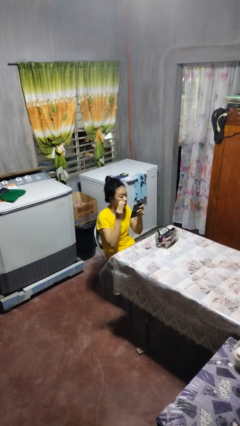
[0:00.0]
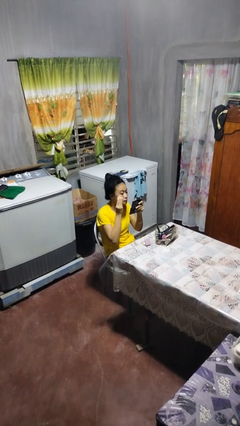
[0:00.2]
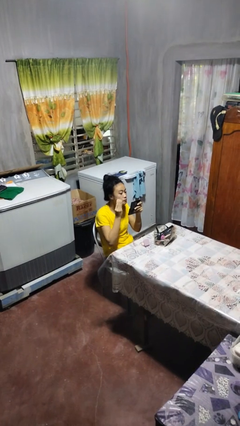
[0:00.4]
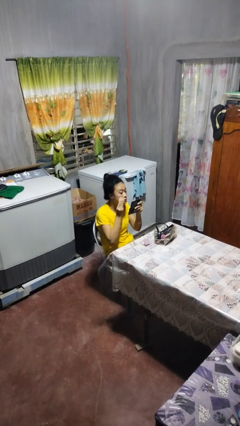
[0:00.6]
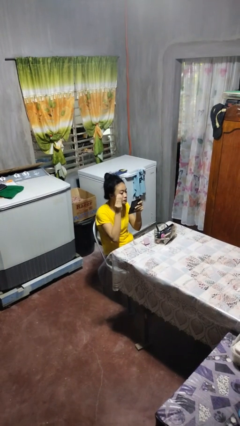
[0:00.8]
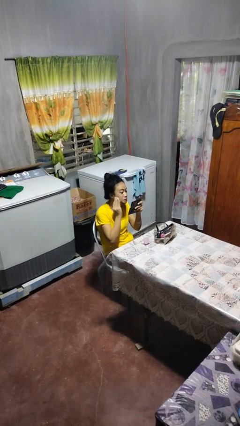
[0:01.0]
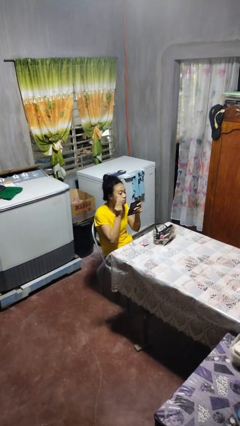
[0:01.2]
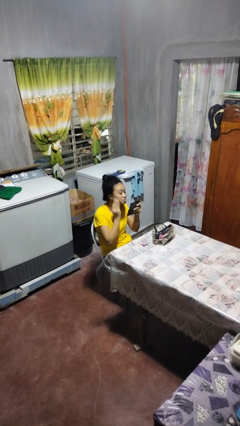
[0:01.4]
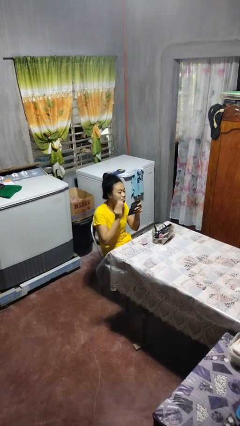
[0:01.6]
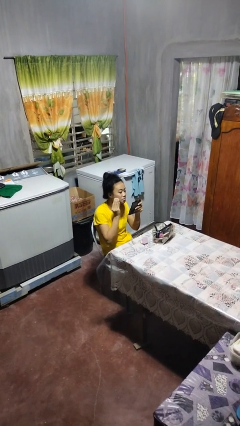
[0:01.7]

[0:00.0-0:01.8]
person applies foundation makeup

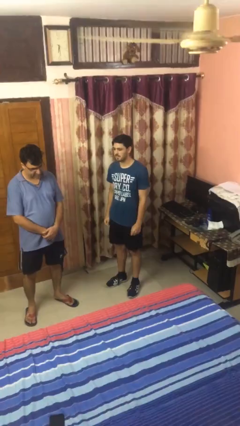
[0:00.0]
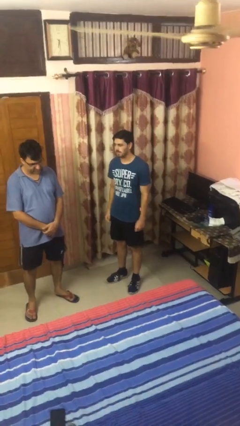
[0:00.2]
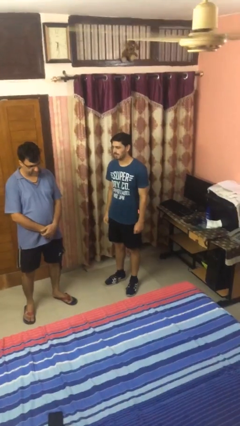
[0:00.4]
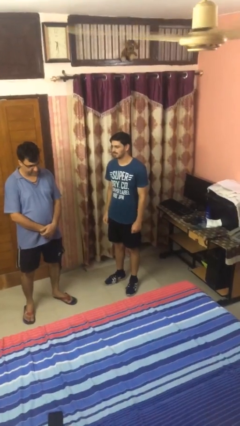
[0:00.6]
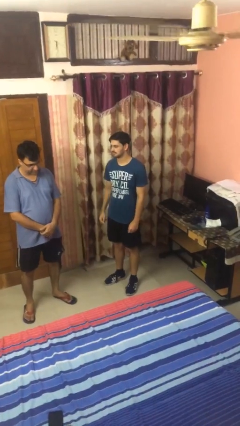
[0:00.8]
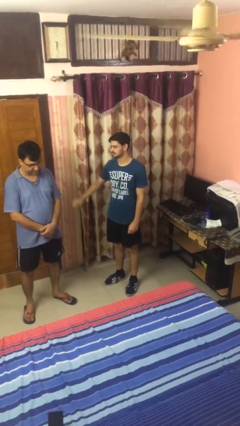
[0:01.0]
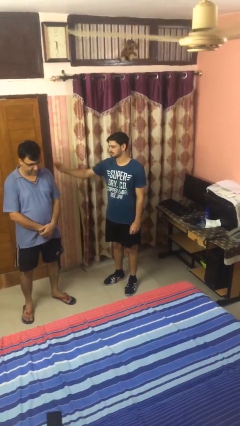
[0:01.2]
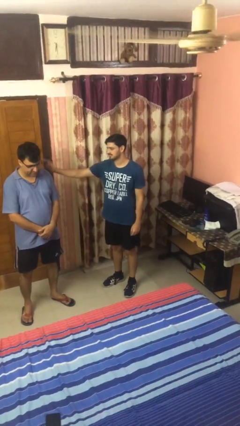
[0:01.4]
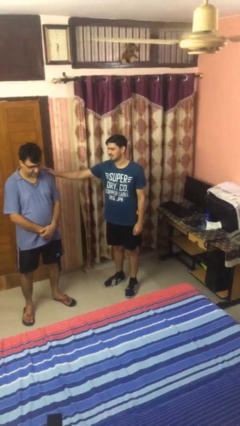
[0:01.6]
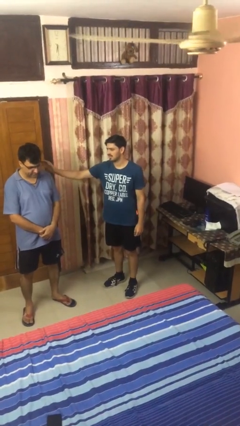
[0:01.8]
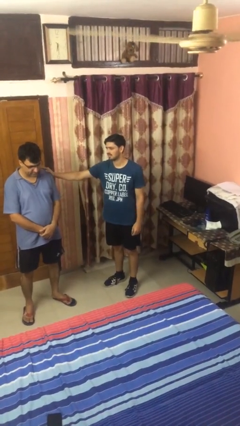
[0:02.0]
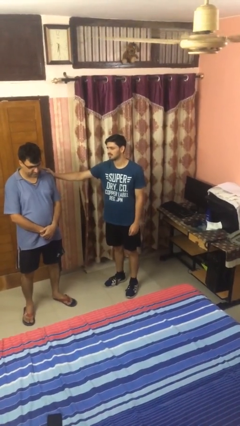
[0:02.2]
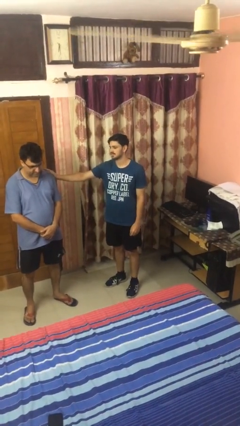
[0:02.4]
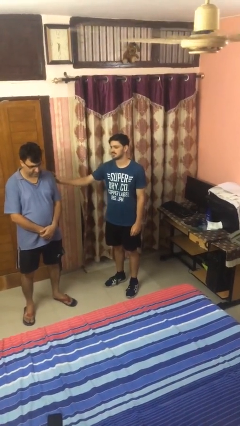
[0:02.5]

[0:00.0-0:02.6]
person pounds shoulders of person

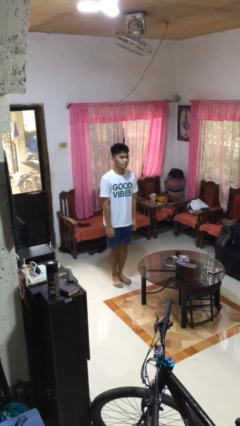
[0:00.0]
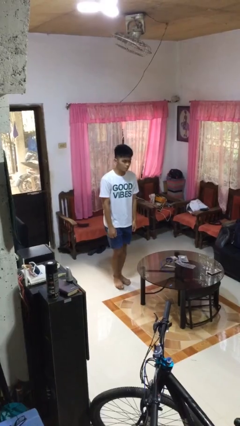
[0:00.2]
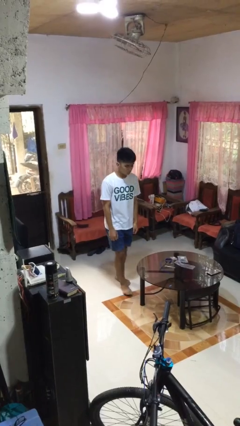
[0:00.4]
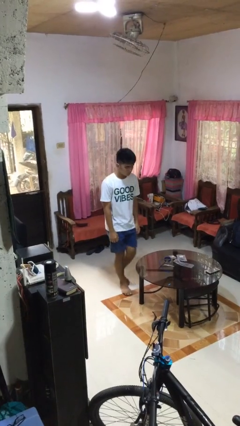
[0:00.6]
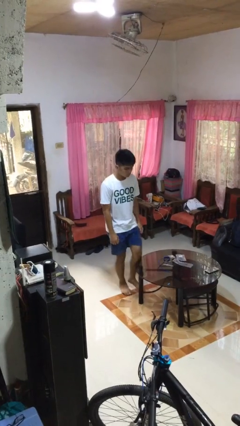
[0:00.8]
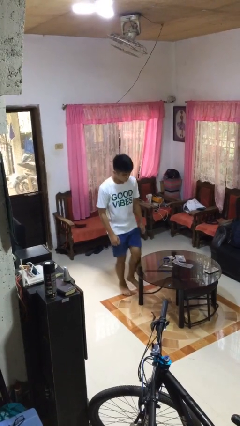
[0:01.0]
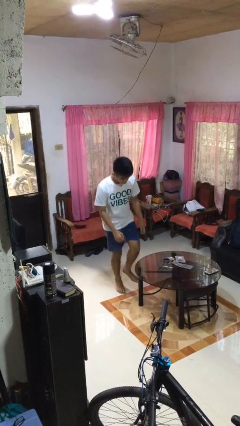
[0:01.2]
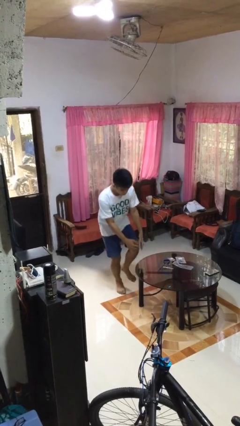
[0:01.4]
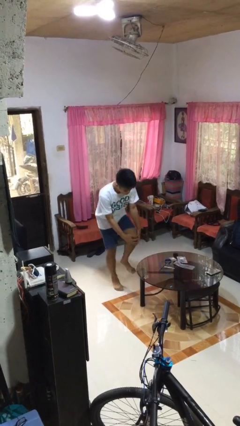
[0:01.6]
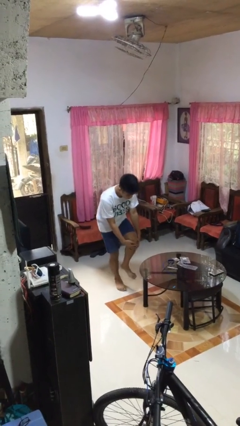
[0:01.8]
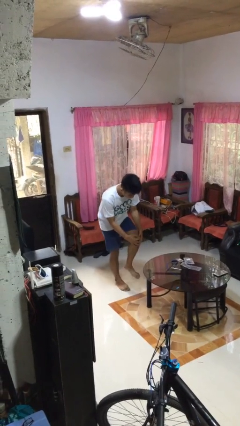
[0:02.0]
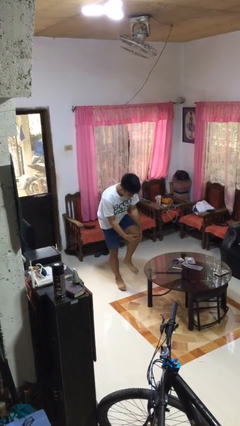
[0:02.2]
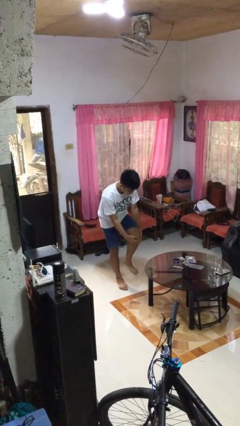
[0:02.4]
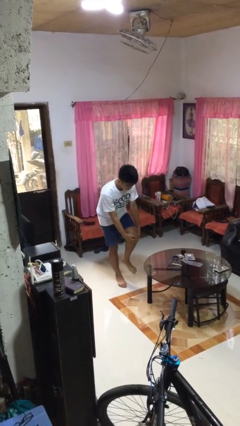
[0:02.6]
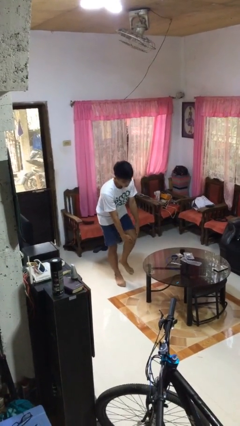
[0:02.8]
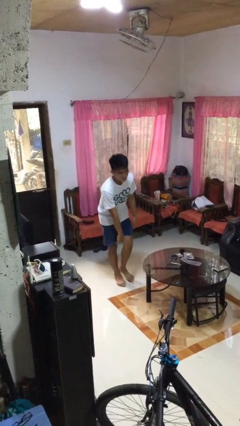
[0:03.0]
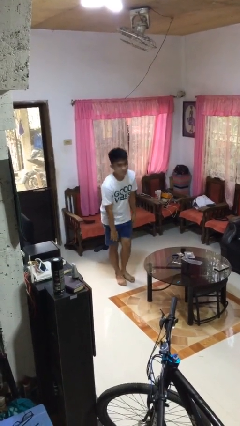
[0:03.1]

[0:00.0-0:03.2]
person bumps into table

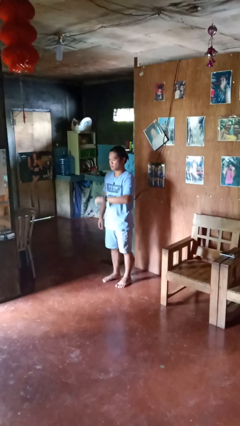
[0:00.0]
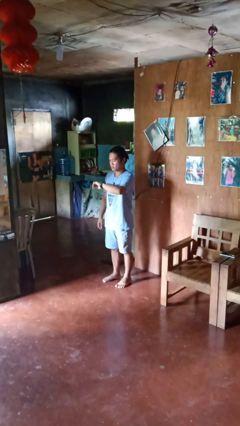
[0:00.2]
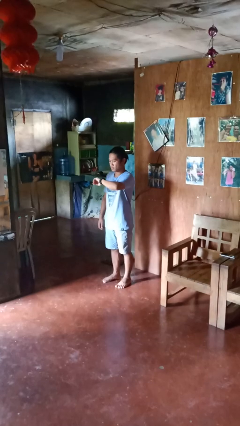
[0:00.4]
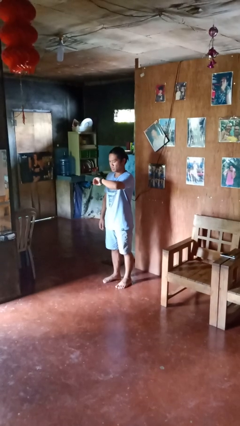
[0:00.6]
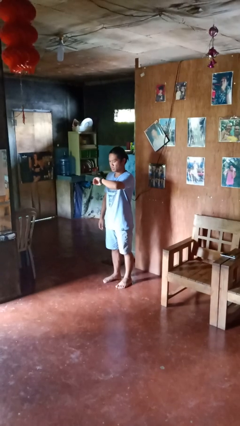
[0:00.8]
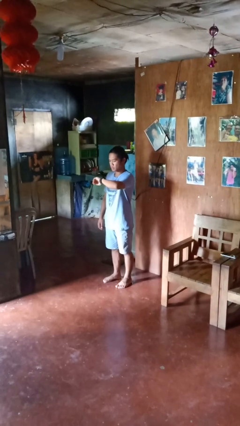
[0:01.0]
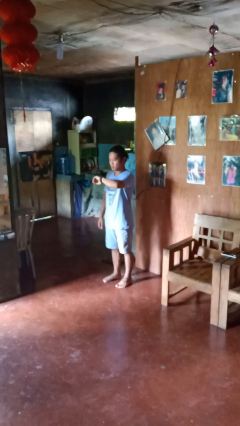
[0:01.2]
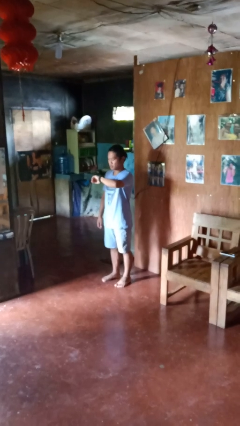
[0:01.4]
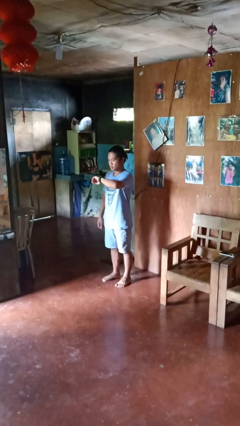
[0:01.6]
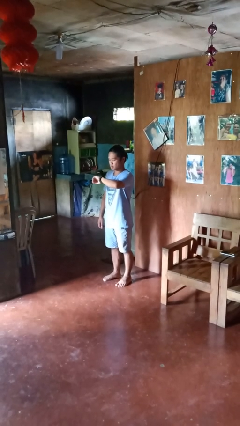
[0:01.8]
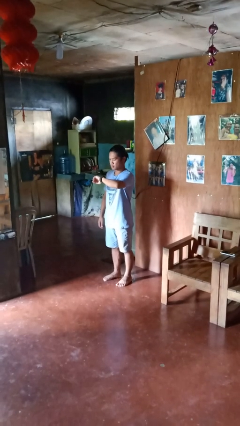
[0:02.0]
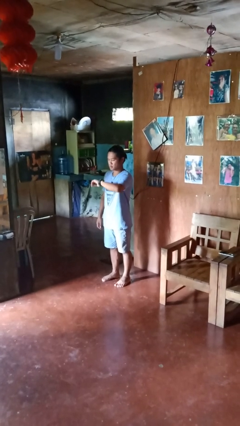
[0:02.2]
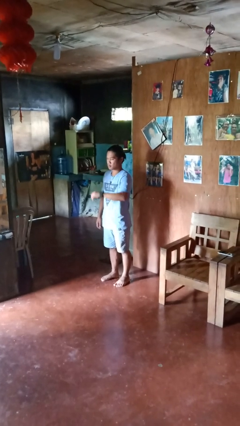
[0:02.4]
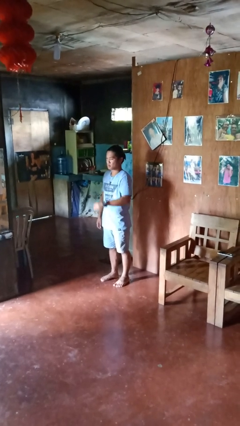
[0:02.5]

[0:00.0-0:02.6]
person looks at wristwatch

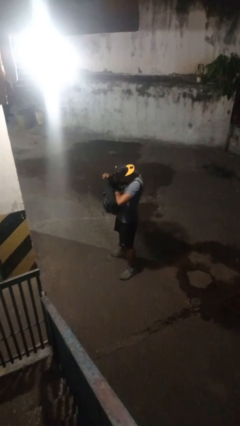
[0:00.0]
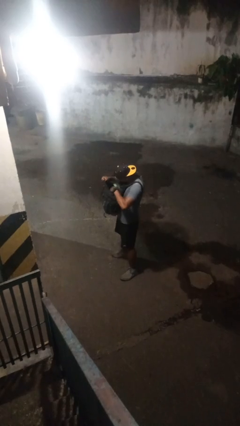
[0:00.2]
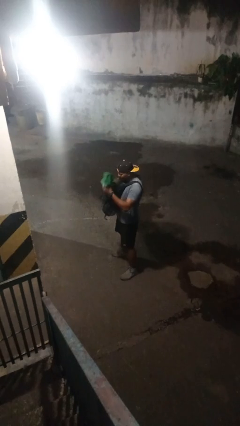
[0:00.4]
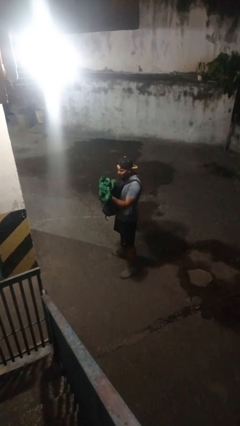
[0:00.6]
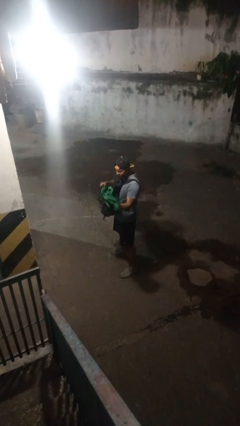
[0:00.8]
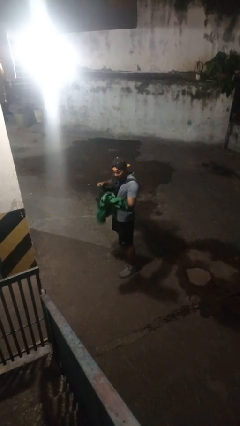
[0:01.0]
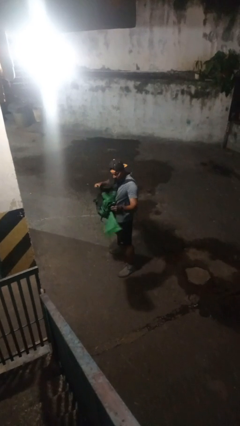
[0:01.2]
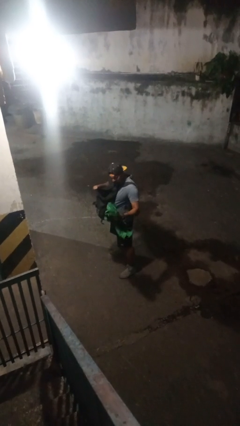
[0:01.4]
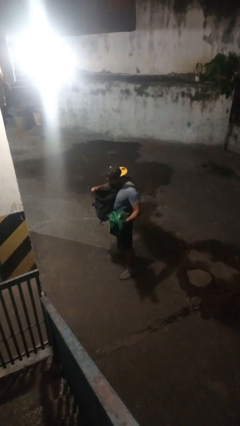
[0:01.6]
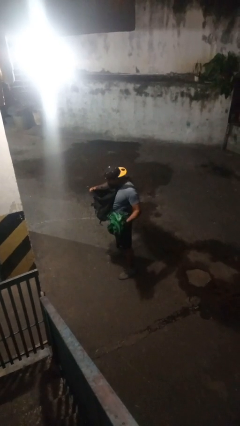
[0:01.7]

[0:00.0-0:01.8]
person takes object from backpack

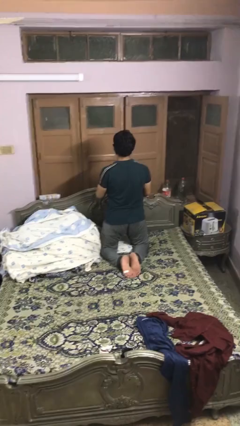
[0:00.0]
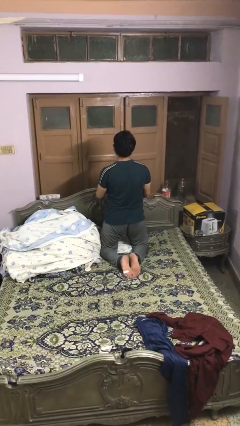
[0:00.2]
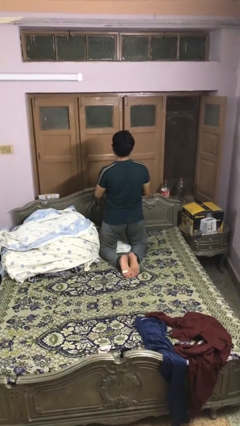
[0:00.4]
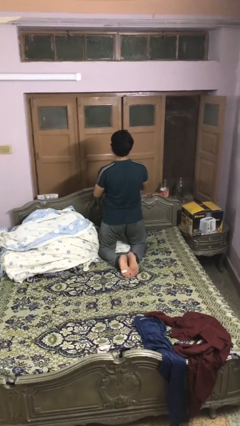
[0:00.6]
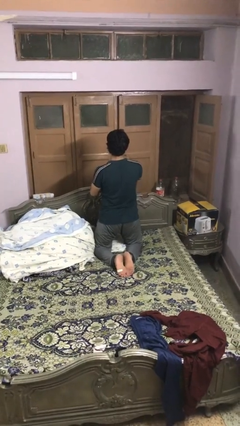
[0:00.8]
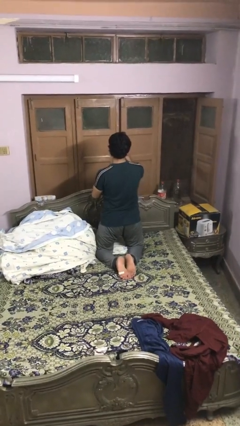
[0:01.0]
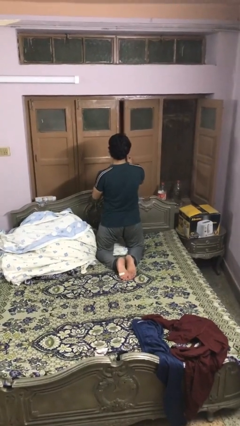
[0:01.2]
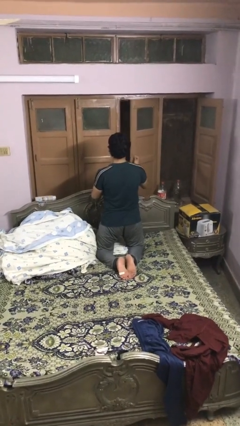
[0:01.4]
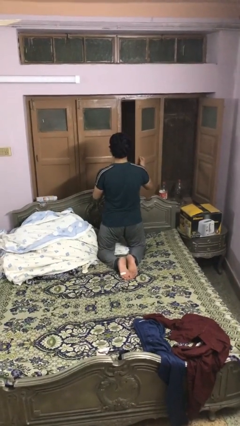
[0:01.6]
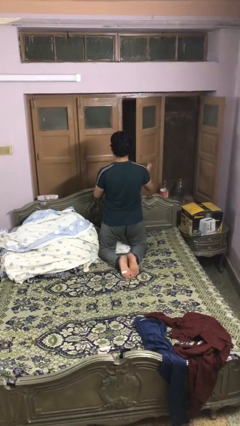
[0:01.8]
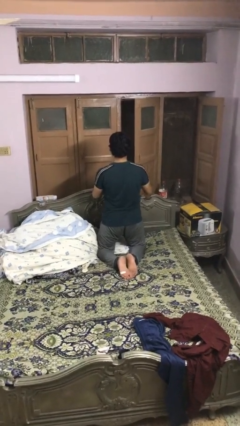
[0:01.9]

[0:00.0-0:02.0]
person opens home window

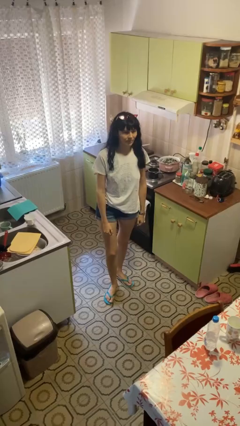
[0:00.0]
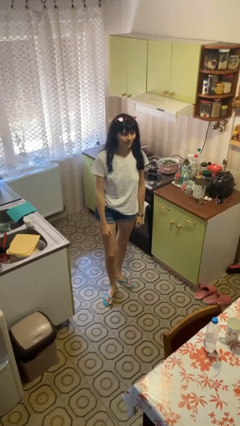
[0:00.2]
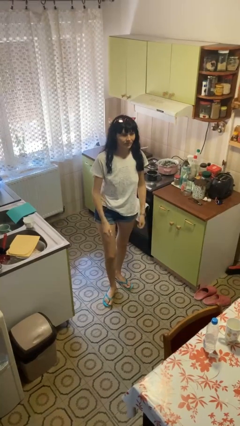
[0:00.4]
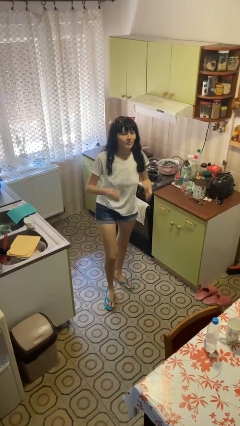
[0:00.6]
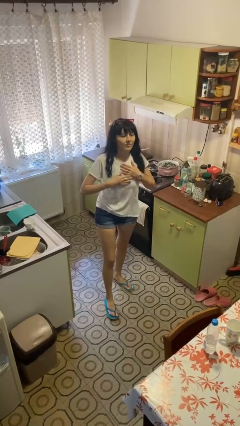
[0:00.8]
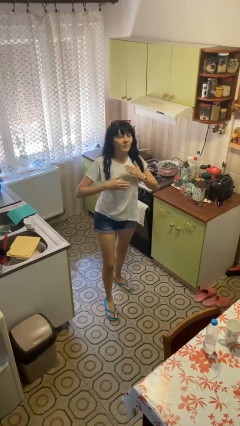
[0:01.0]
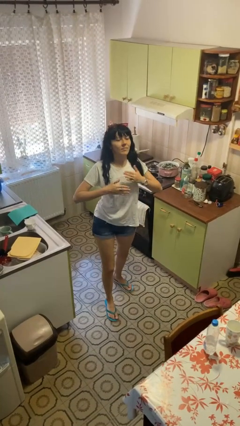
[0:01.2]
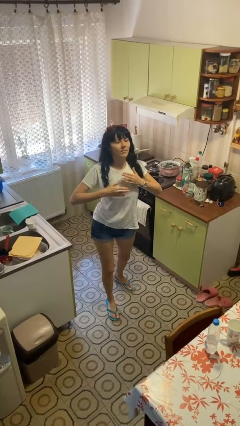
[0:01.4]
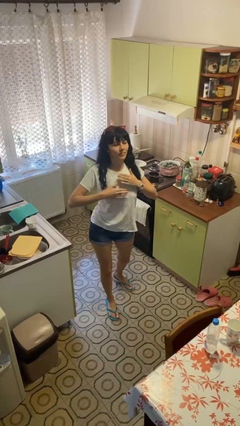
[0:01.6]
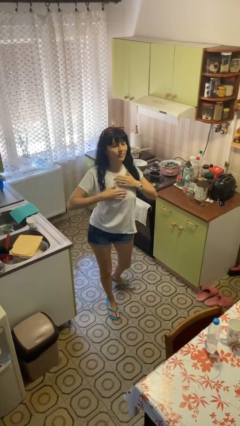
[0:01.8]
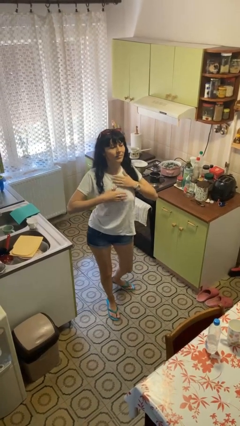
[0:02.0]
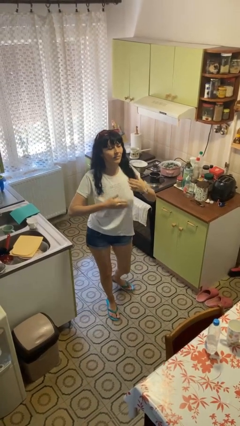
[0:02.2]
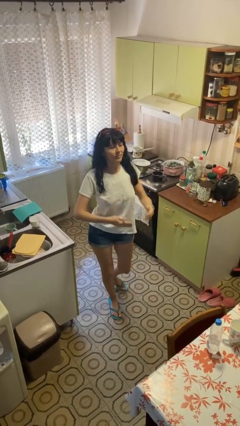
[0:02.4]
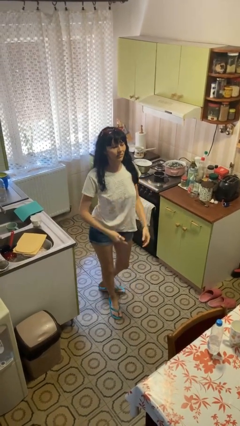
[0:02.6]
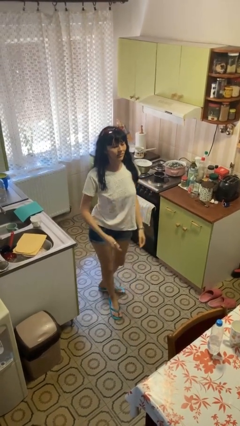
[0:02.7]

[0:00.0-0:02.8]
person drums on chest

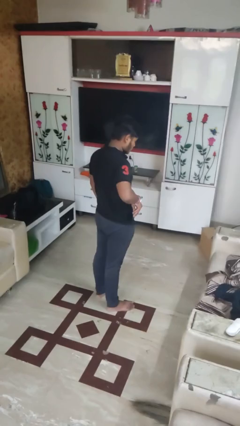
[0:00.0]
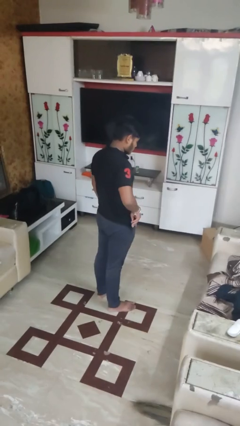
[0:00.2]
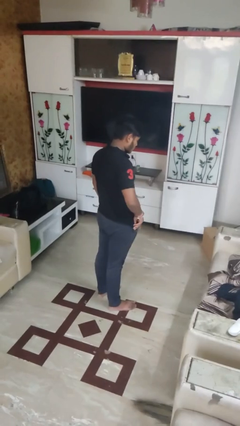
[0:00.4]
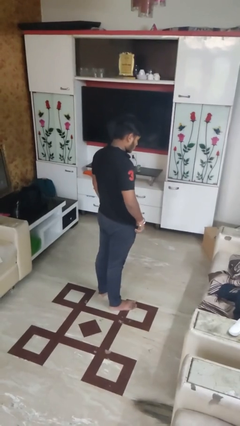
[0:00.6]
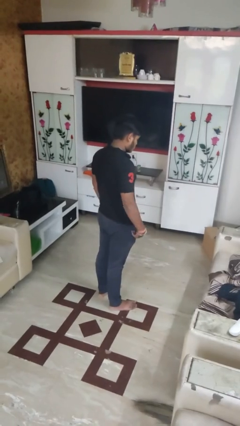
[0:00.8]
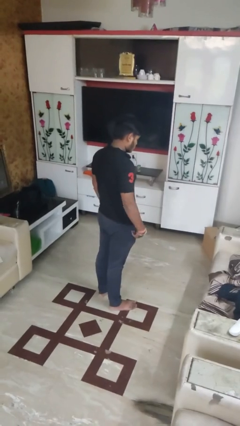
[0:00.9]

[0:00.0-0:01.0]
person puts phone into pocket
